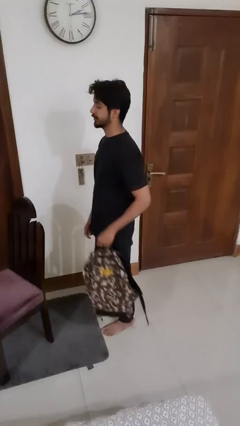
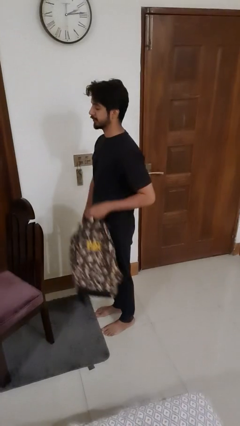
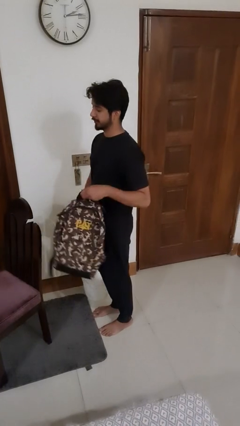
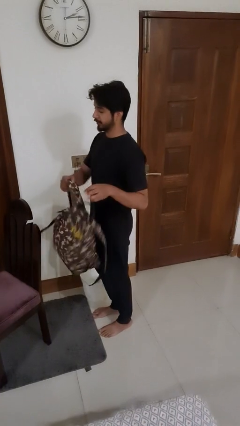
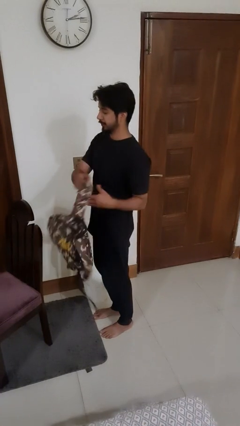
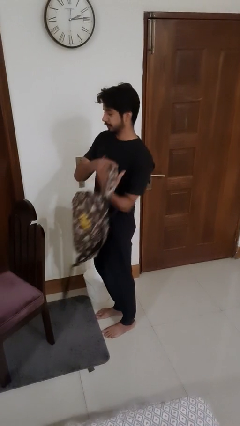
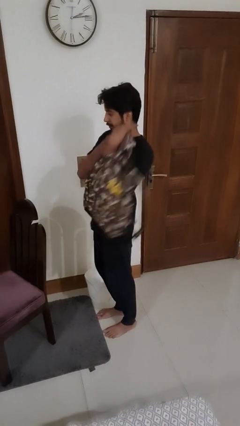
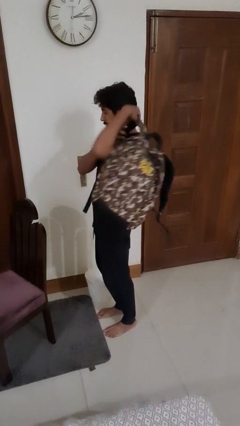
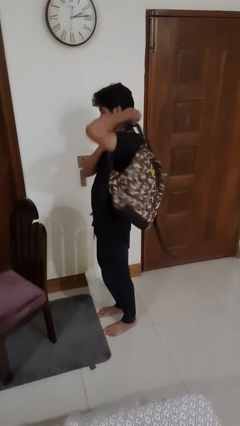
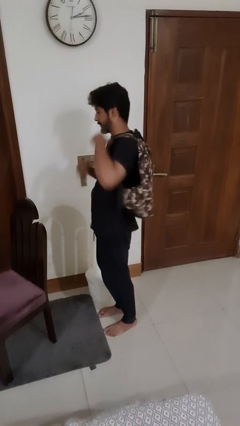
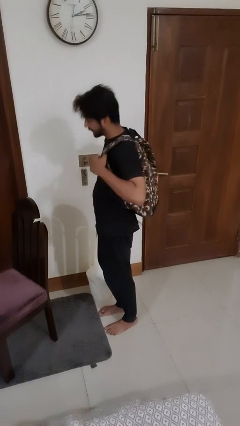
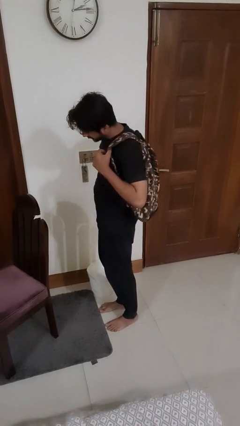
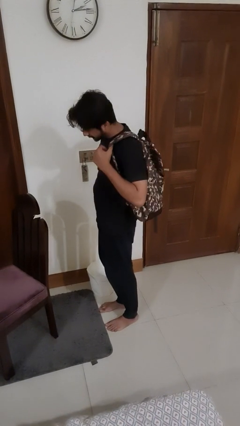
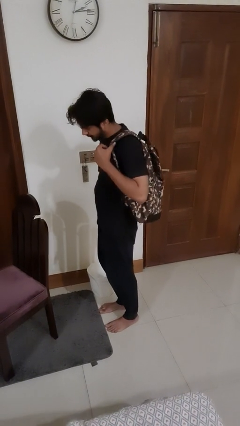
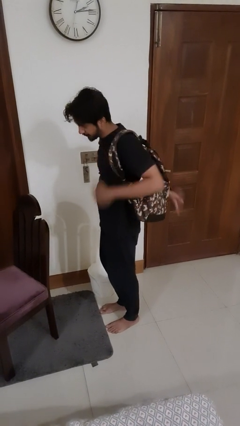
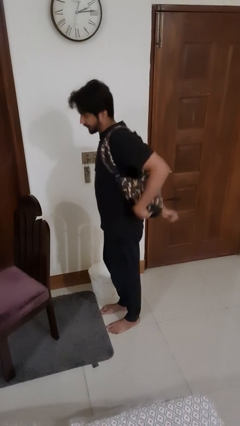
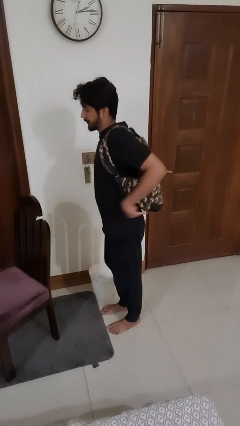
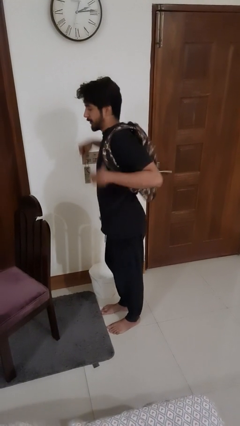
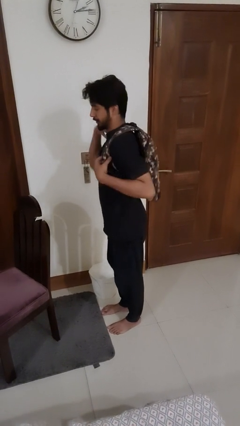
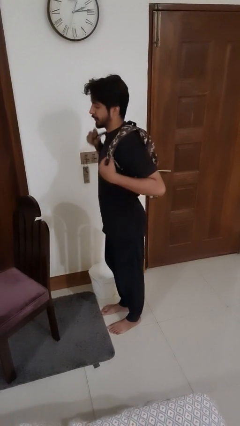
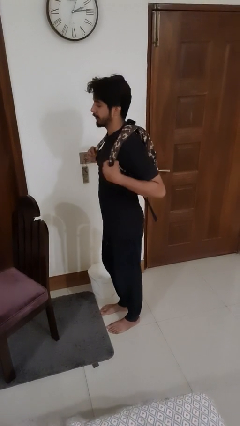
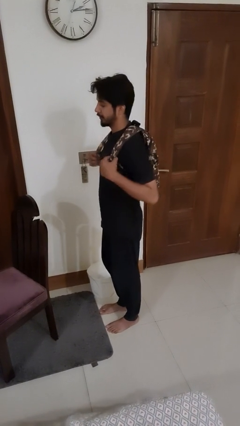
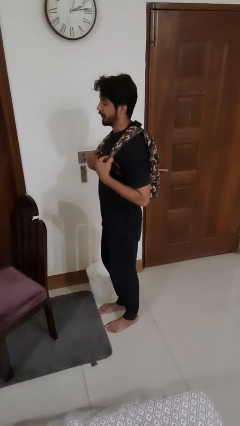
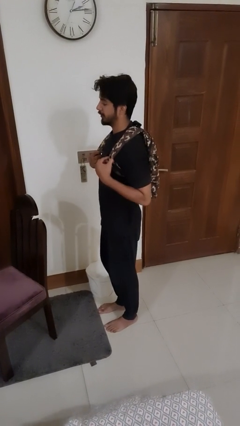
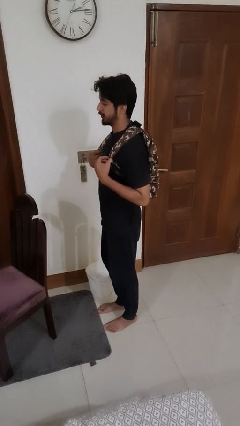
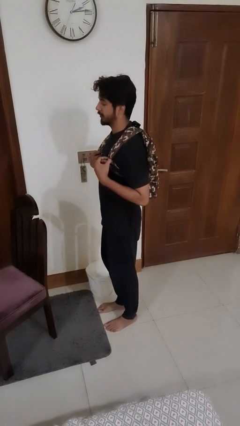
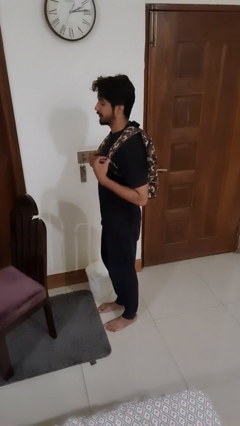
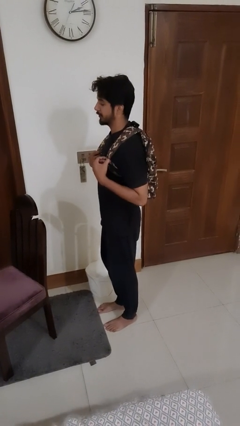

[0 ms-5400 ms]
person puts on backpack

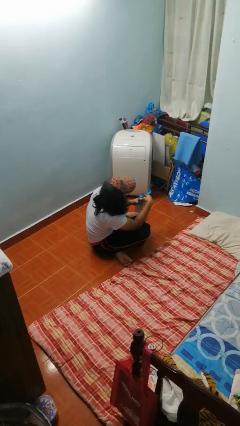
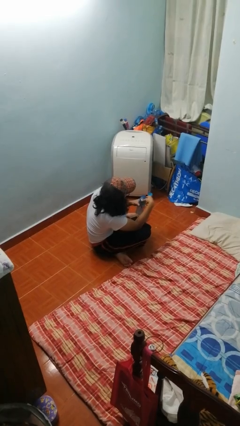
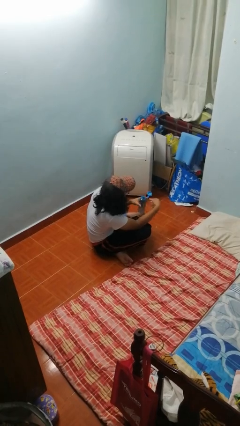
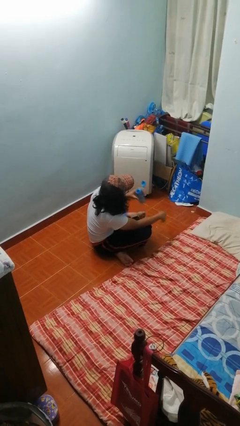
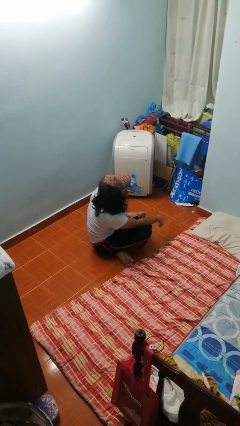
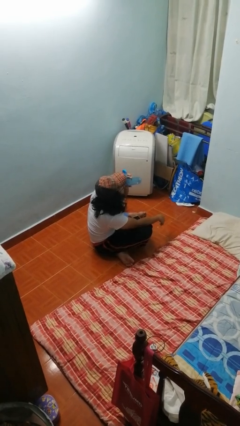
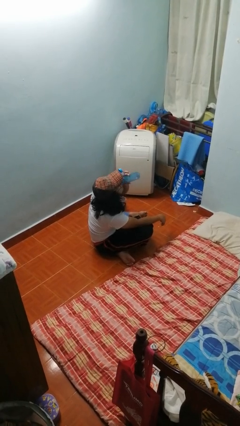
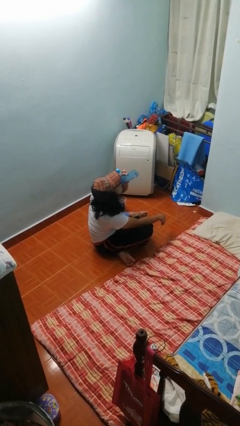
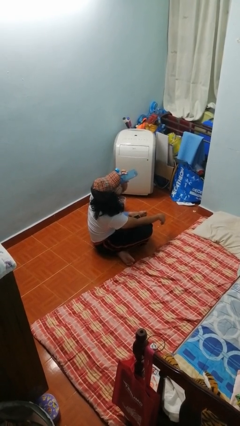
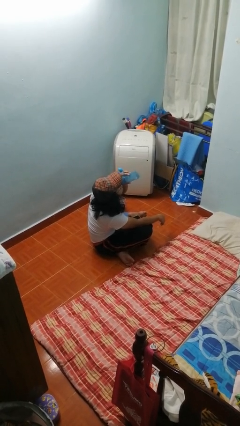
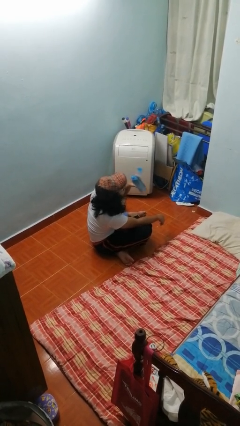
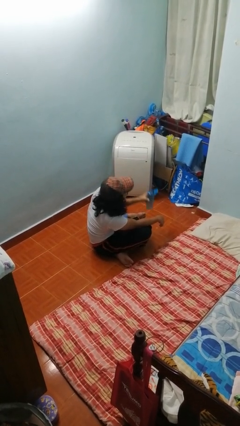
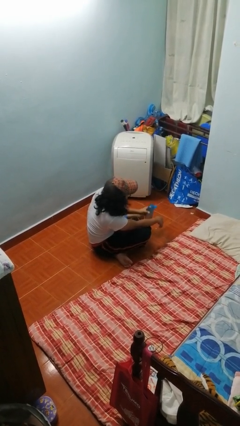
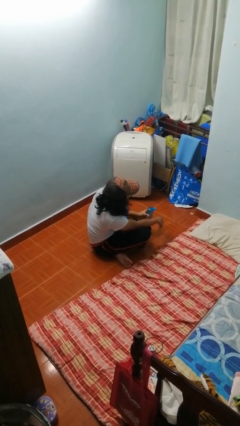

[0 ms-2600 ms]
person drinks from bottle

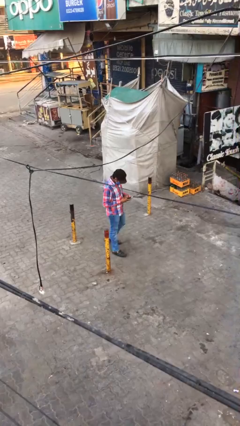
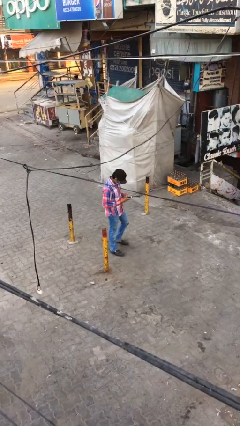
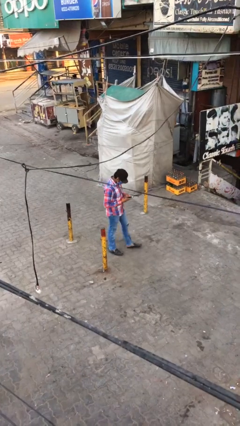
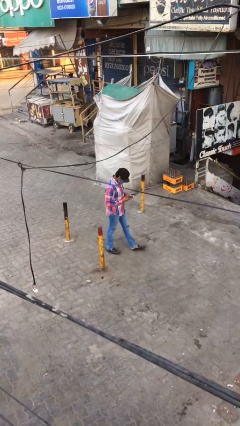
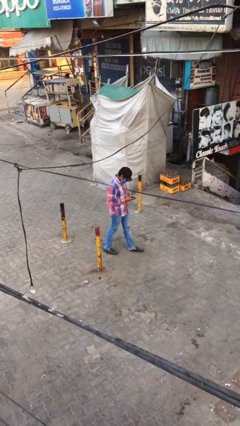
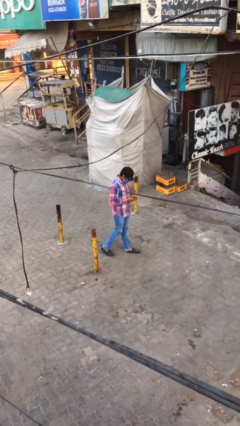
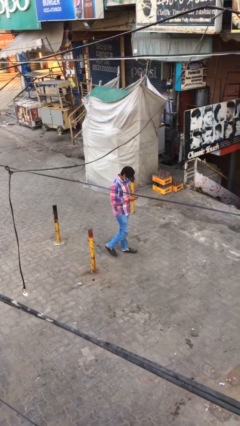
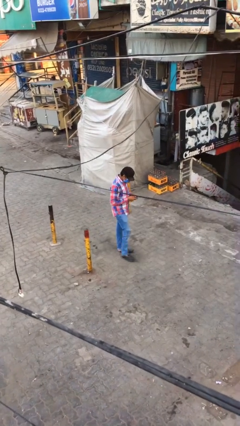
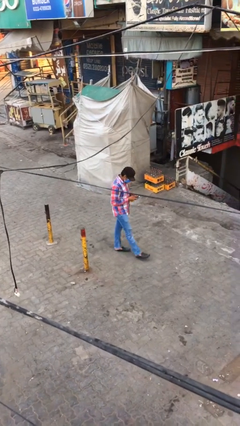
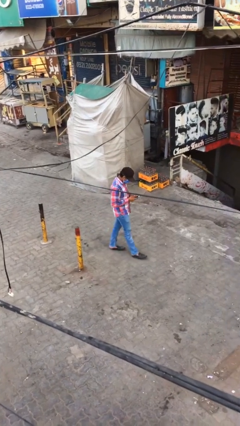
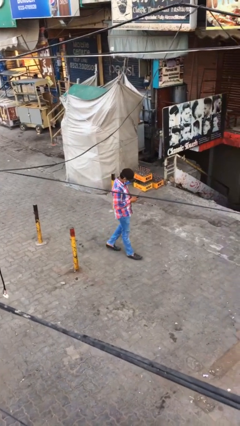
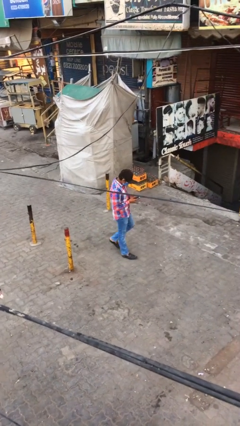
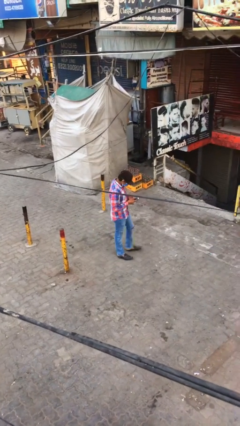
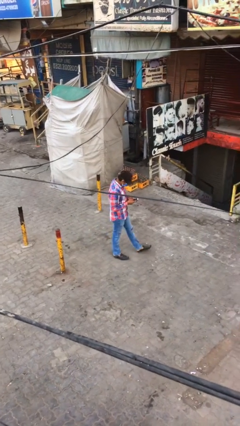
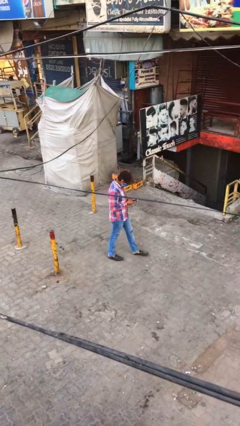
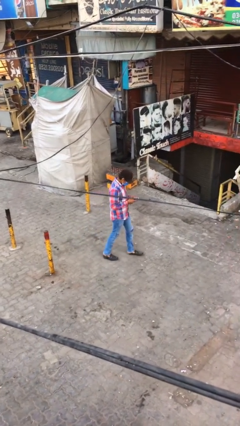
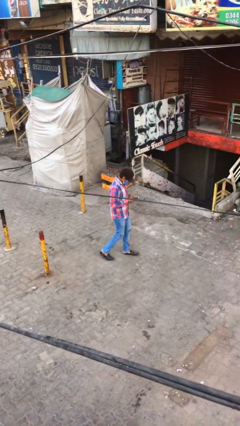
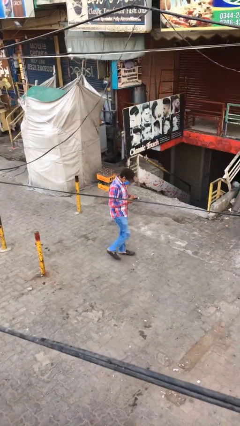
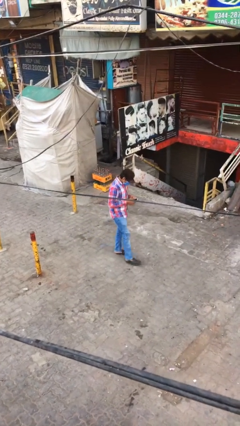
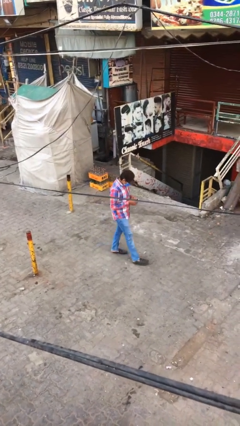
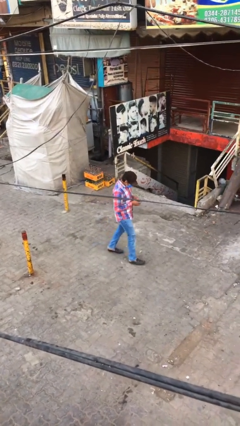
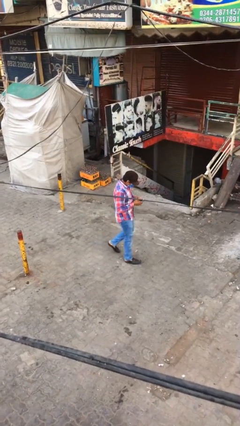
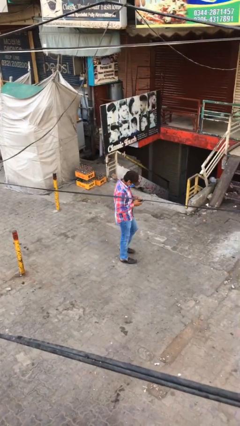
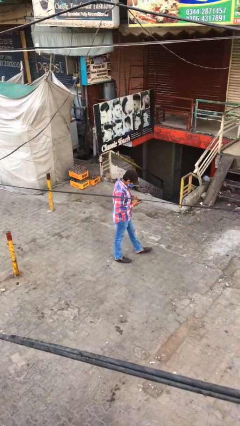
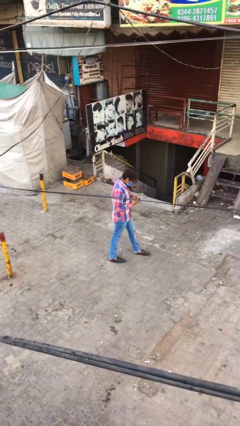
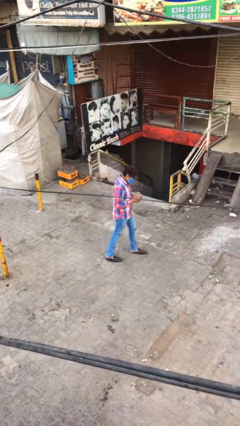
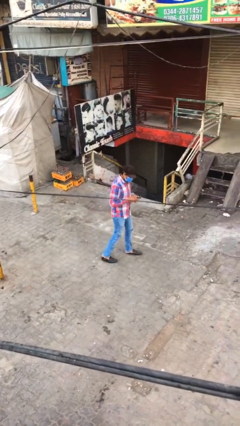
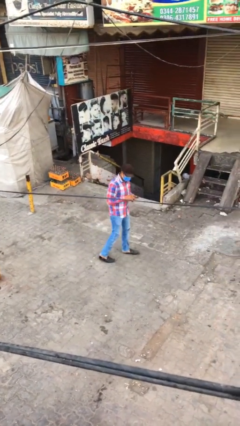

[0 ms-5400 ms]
person texts on phone

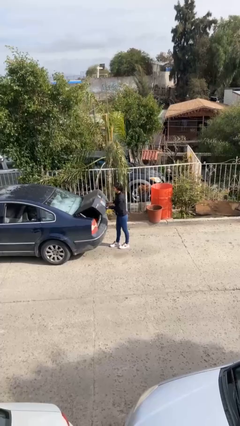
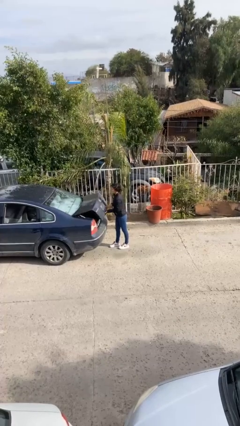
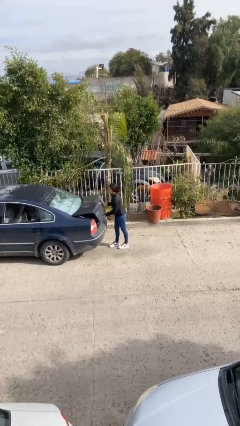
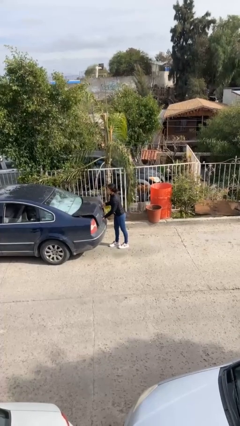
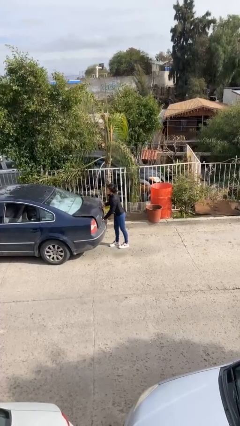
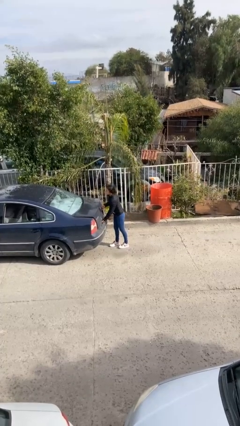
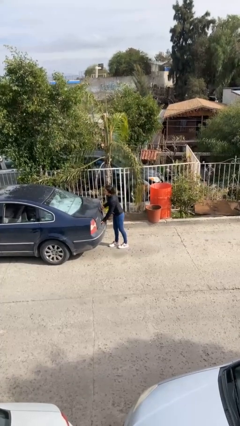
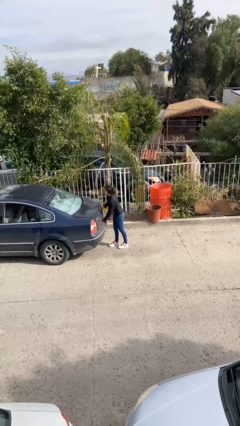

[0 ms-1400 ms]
person closes car trunk

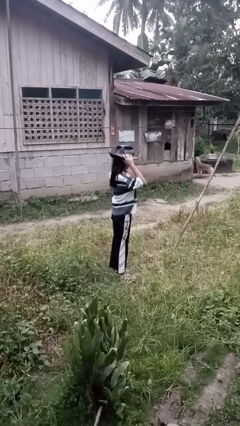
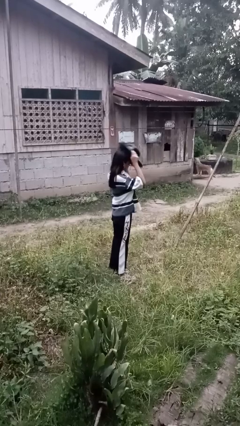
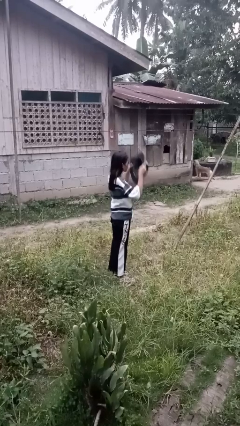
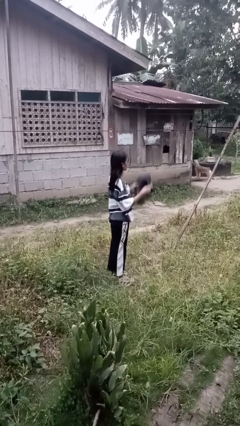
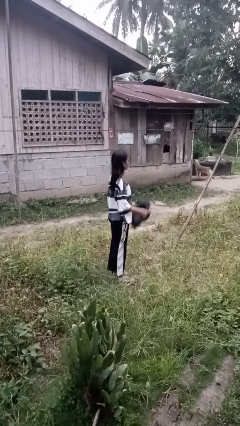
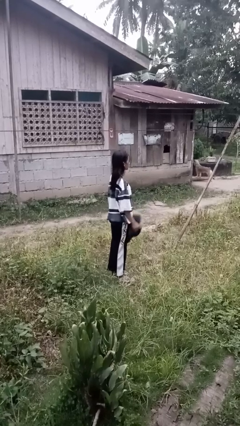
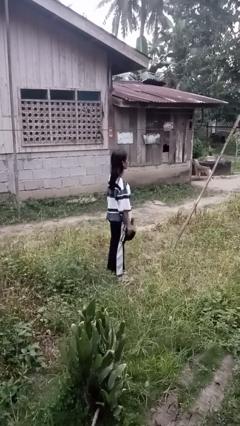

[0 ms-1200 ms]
person takes off hat

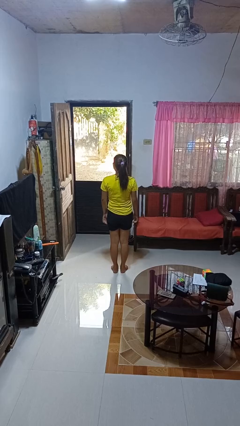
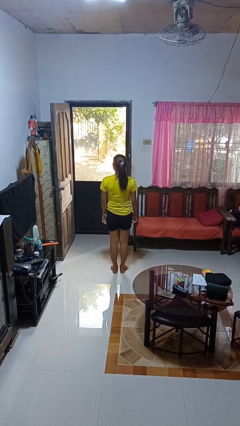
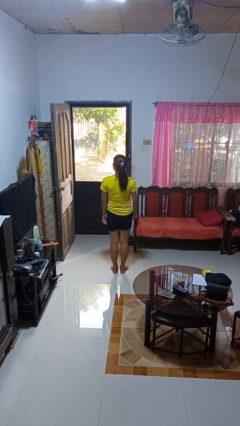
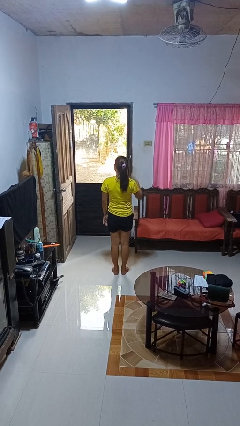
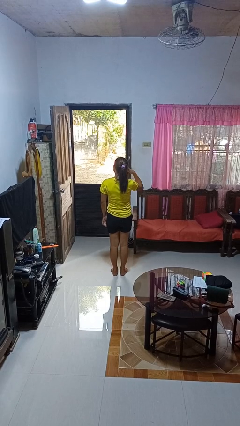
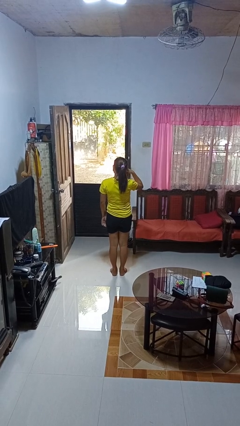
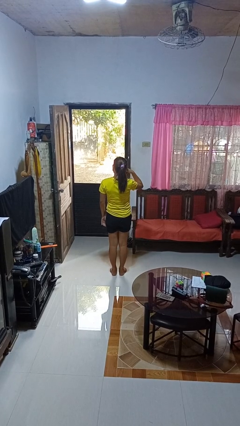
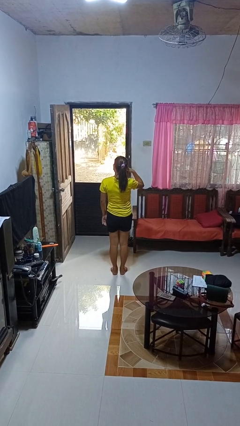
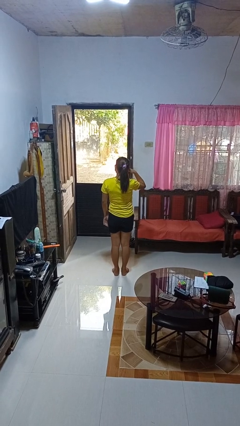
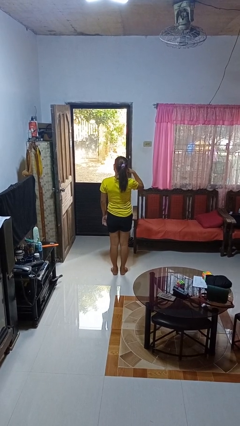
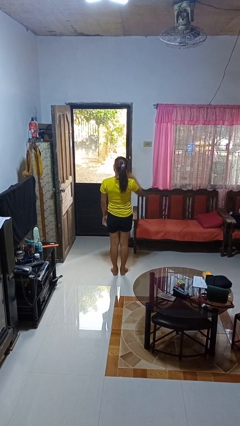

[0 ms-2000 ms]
person gestures call me
